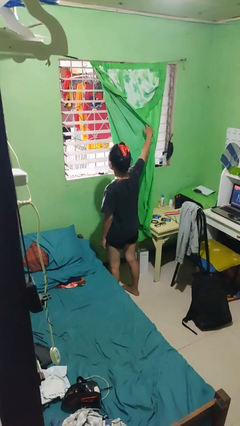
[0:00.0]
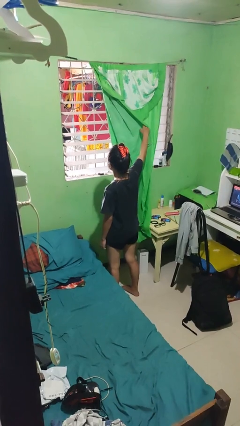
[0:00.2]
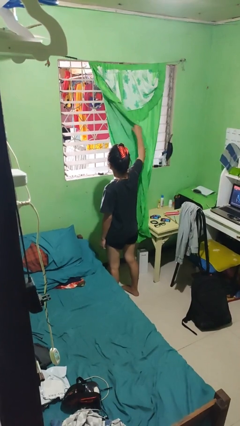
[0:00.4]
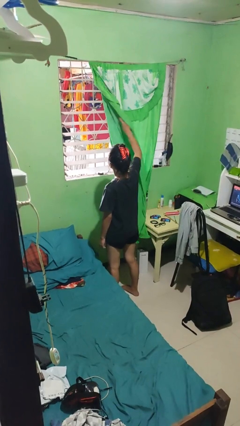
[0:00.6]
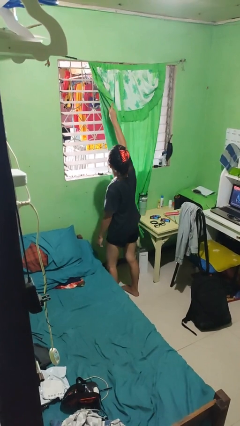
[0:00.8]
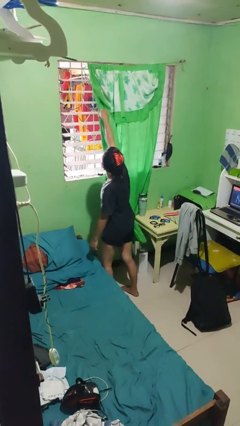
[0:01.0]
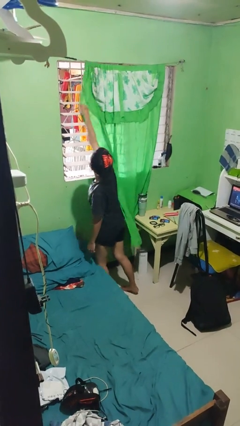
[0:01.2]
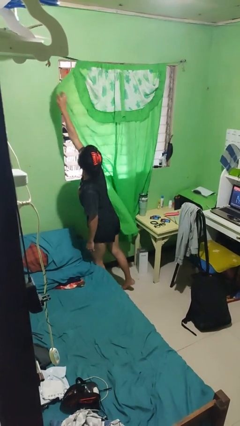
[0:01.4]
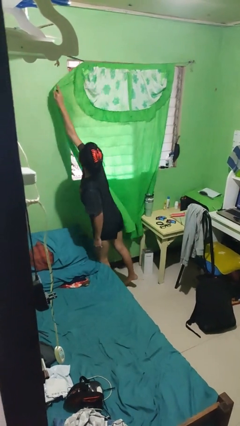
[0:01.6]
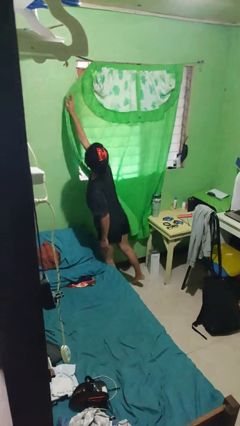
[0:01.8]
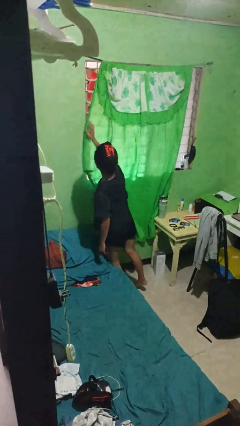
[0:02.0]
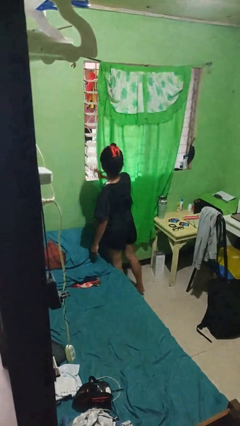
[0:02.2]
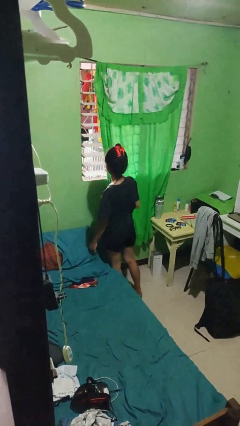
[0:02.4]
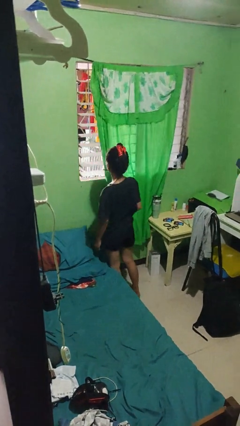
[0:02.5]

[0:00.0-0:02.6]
person closes curtains

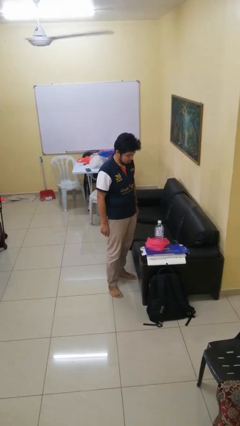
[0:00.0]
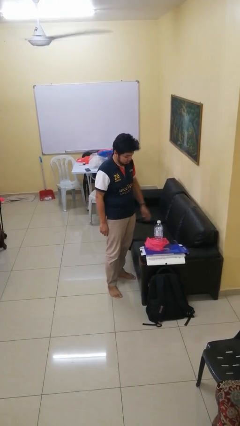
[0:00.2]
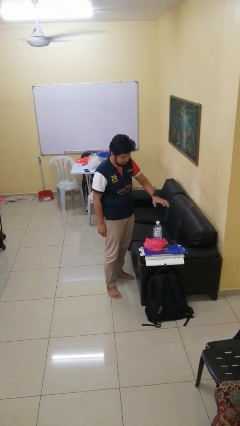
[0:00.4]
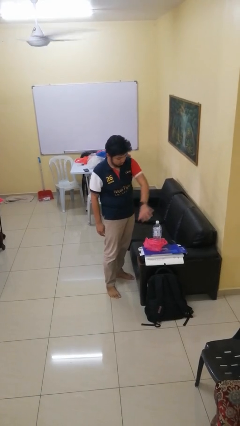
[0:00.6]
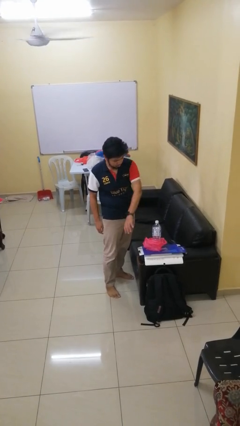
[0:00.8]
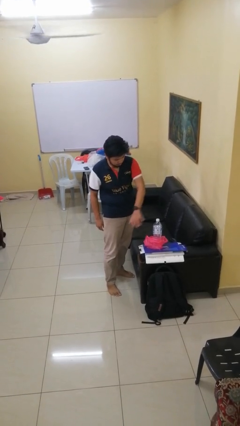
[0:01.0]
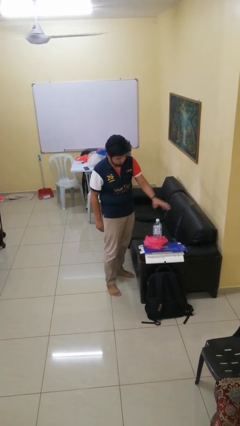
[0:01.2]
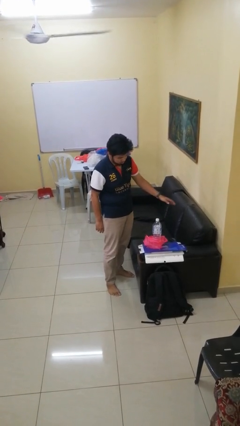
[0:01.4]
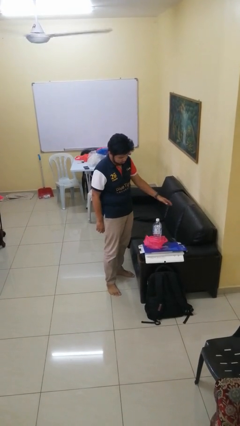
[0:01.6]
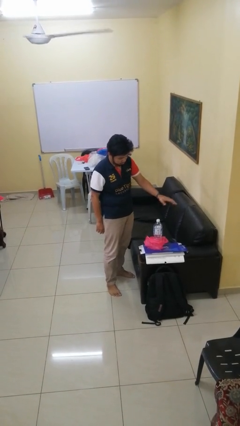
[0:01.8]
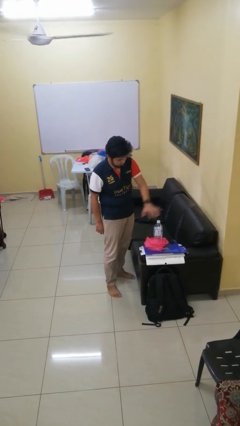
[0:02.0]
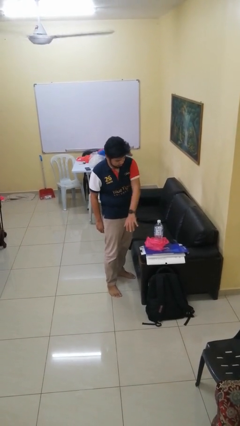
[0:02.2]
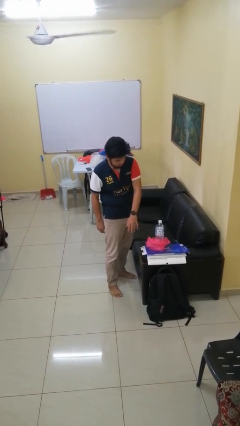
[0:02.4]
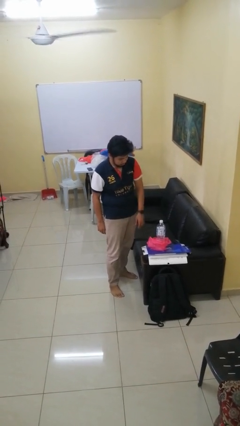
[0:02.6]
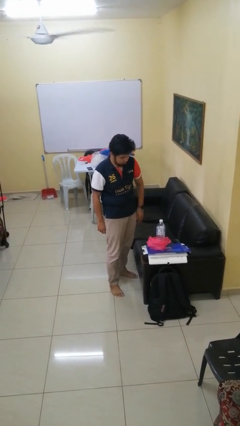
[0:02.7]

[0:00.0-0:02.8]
person waves hand over object

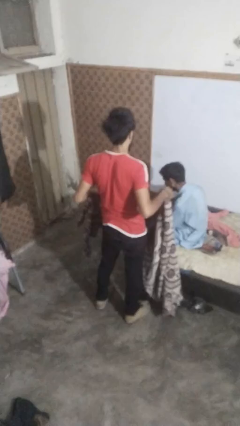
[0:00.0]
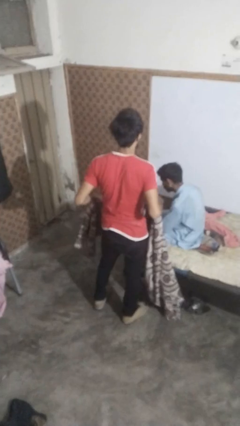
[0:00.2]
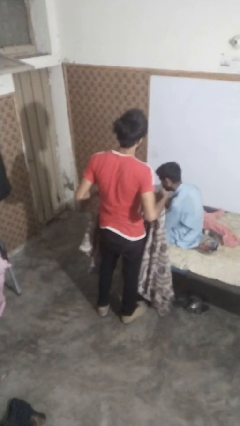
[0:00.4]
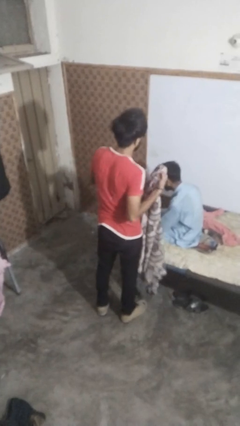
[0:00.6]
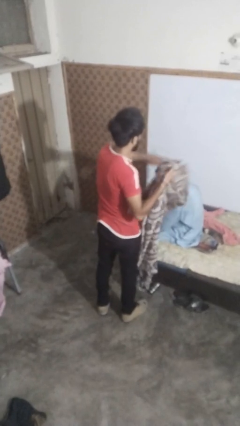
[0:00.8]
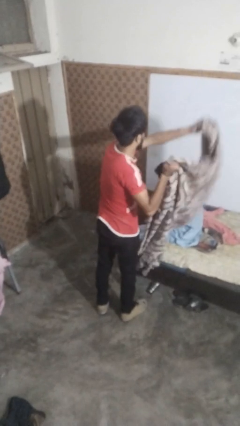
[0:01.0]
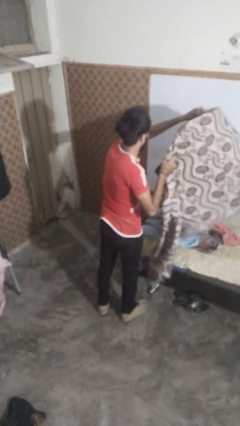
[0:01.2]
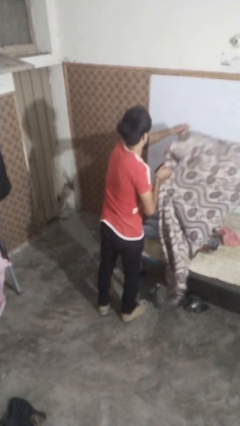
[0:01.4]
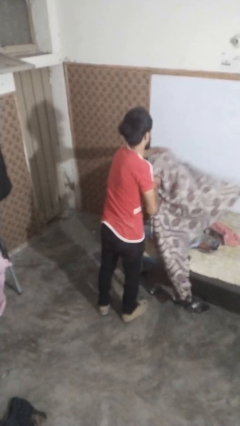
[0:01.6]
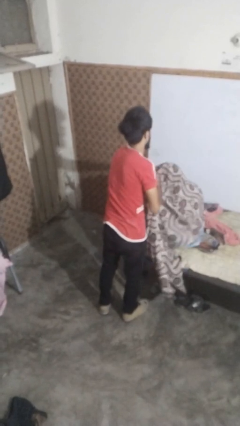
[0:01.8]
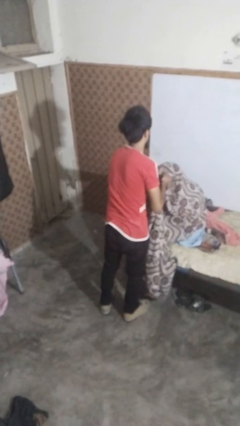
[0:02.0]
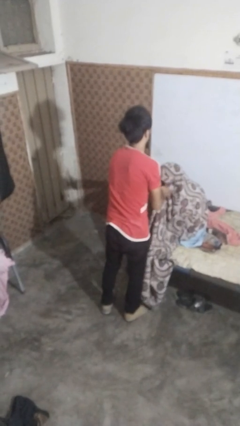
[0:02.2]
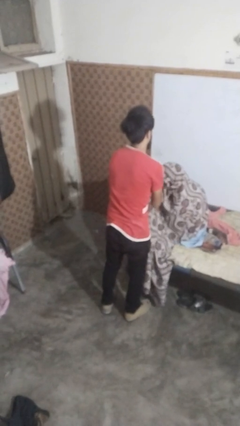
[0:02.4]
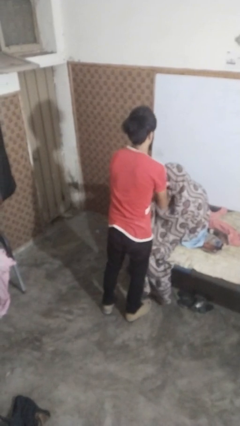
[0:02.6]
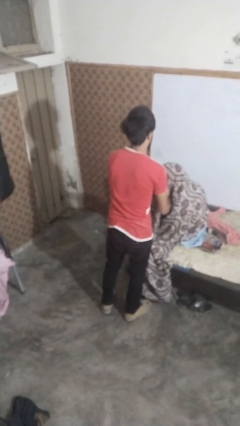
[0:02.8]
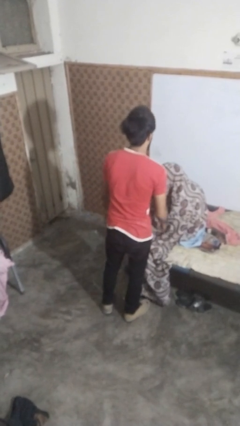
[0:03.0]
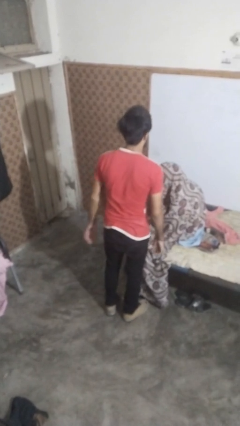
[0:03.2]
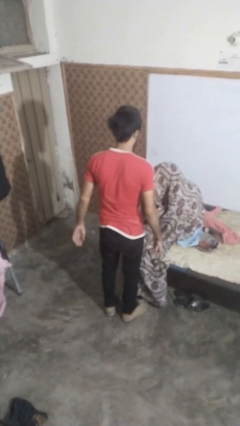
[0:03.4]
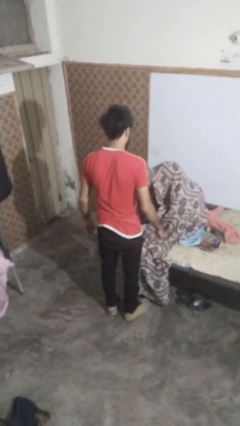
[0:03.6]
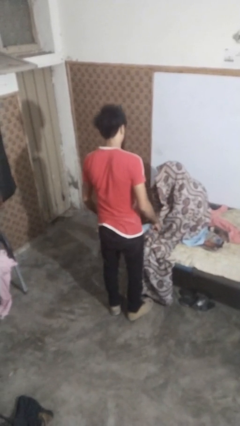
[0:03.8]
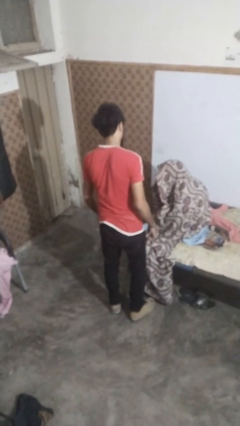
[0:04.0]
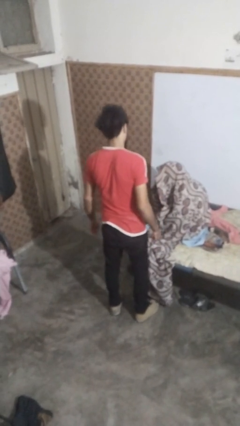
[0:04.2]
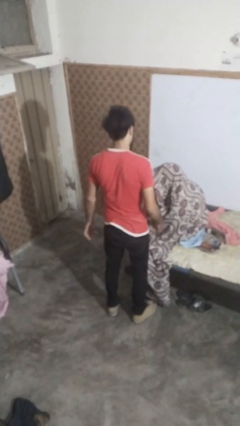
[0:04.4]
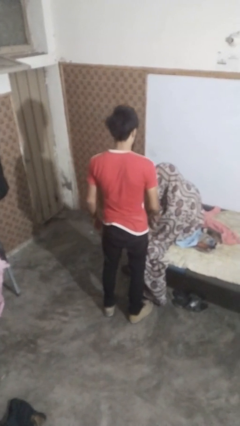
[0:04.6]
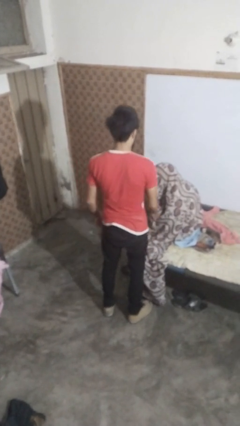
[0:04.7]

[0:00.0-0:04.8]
person covers friend with blanket

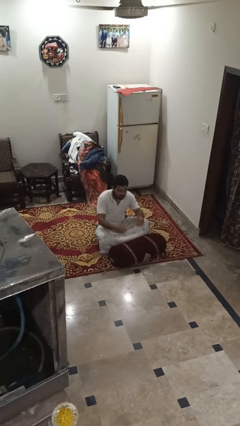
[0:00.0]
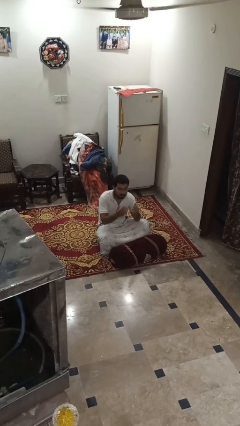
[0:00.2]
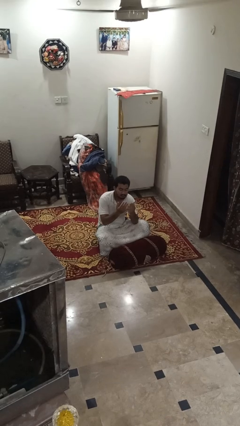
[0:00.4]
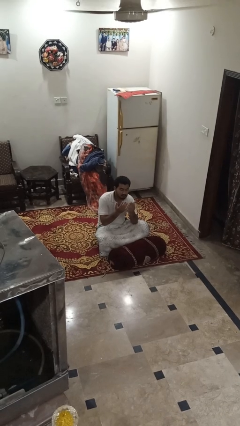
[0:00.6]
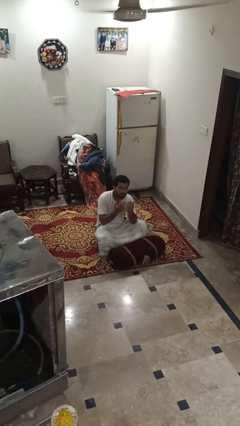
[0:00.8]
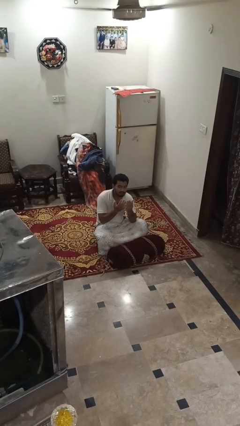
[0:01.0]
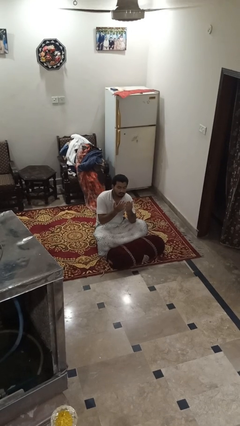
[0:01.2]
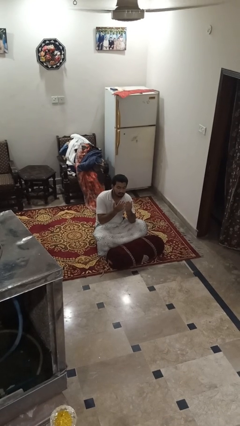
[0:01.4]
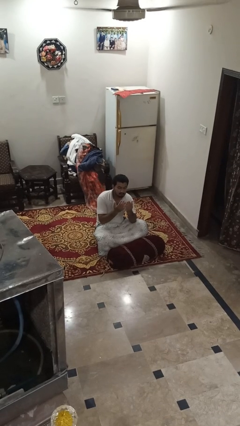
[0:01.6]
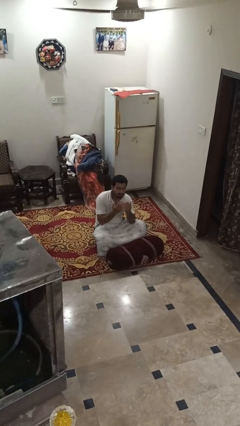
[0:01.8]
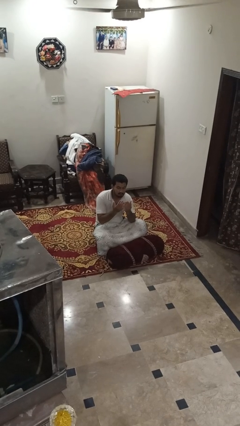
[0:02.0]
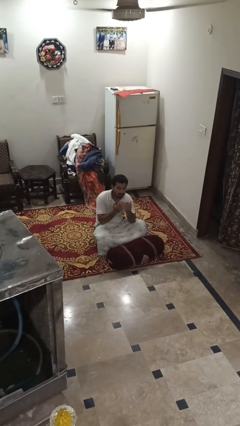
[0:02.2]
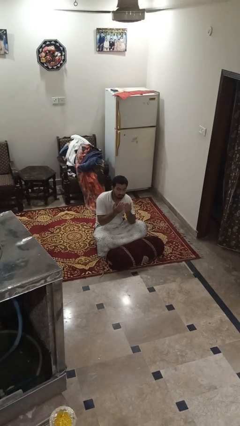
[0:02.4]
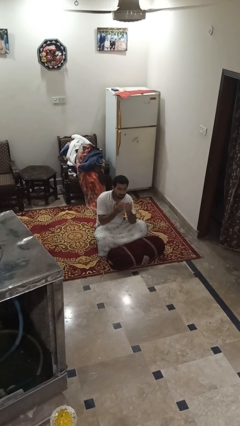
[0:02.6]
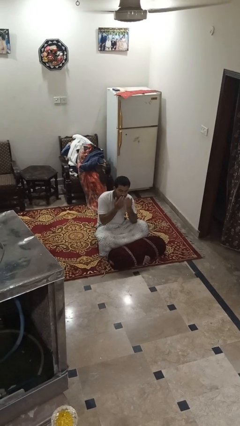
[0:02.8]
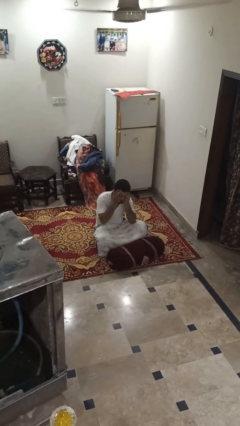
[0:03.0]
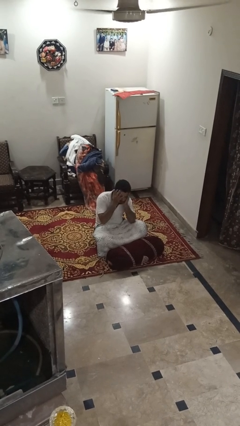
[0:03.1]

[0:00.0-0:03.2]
person prays

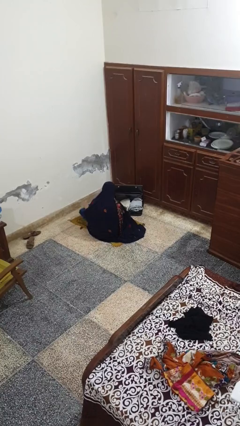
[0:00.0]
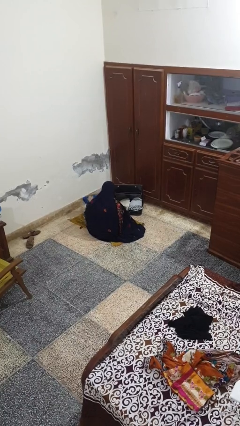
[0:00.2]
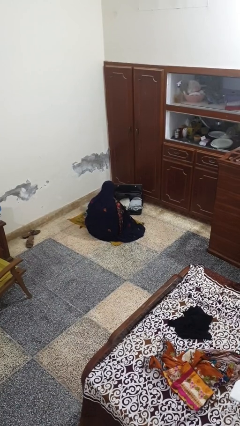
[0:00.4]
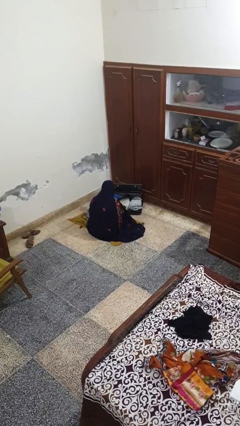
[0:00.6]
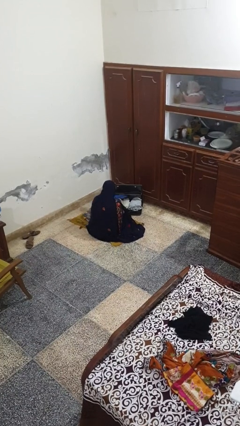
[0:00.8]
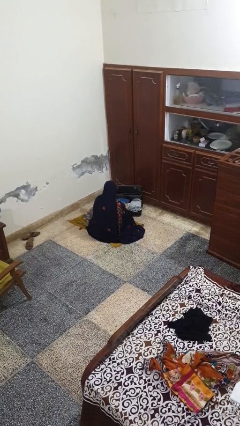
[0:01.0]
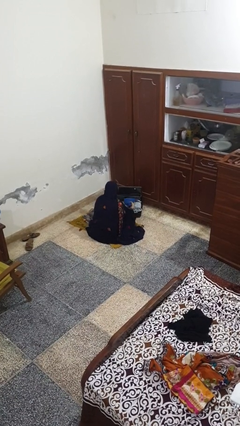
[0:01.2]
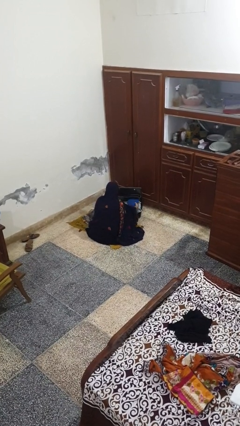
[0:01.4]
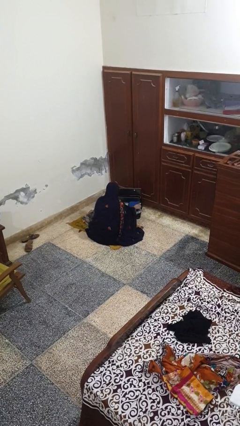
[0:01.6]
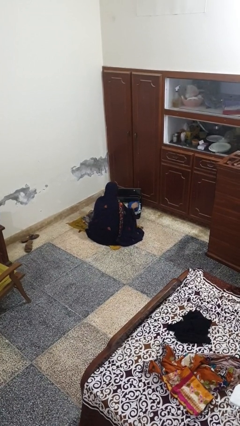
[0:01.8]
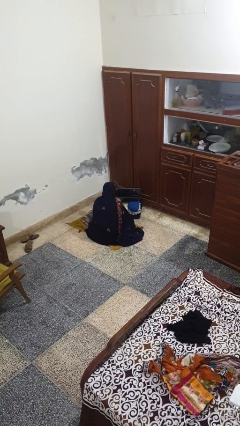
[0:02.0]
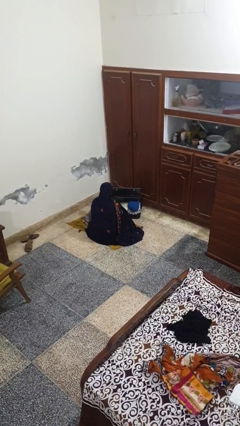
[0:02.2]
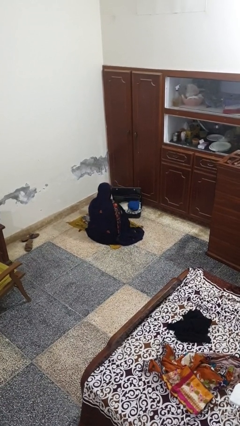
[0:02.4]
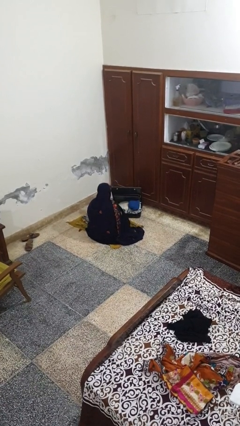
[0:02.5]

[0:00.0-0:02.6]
person loads clothes into suitcase

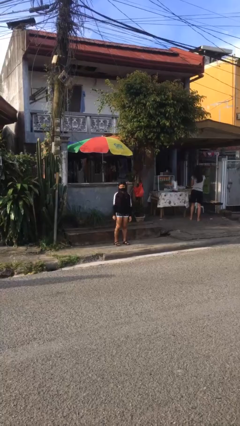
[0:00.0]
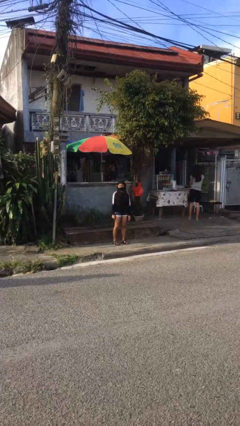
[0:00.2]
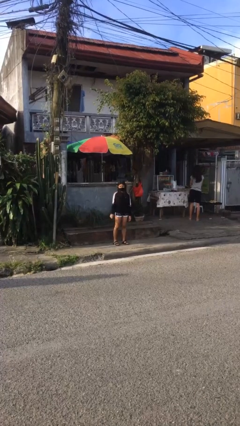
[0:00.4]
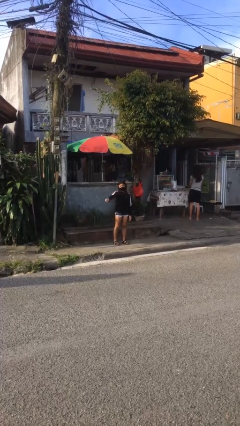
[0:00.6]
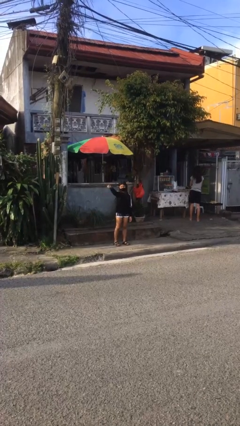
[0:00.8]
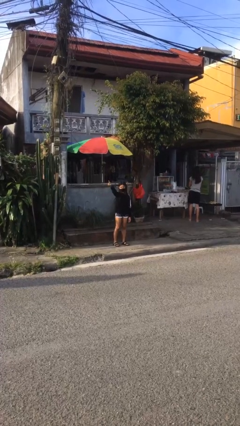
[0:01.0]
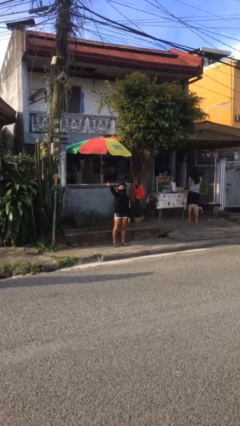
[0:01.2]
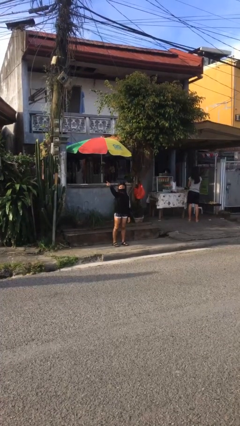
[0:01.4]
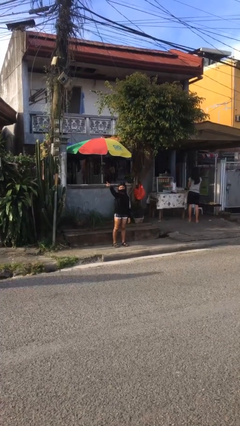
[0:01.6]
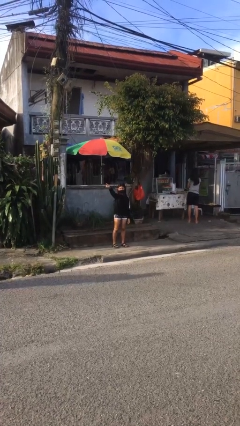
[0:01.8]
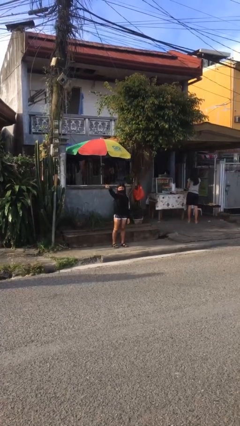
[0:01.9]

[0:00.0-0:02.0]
person points at person
